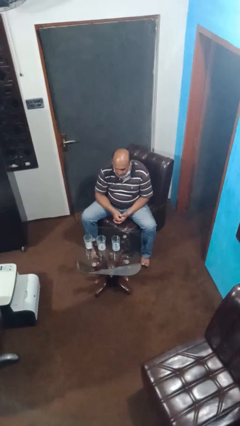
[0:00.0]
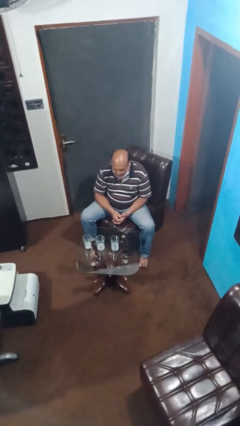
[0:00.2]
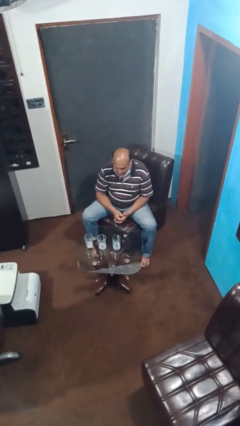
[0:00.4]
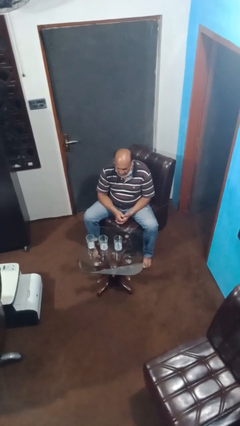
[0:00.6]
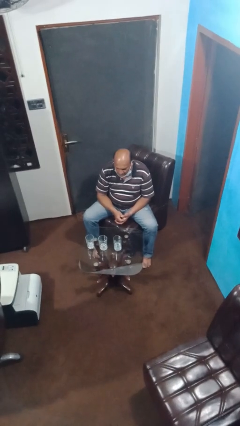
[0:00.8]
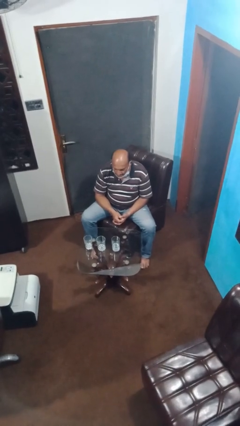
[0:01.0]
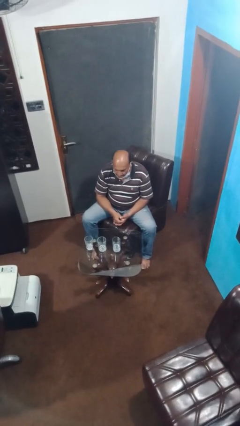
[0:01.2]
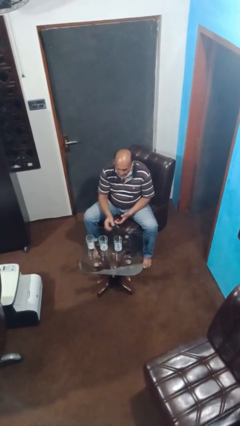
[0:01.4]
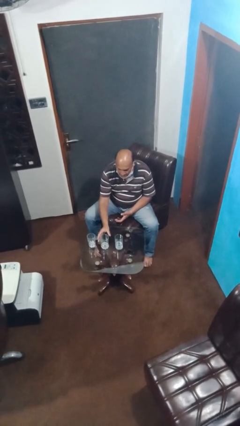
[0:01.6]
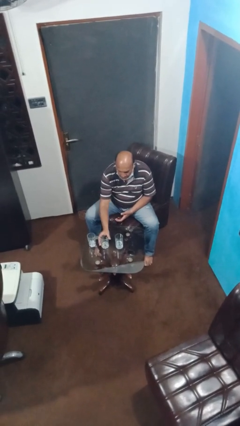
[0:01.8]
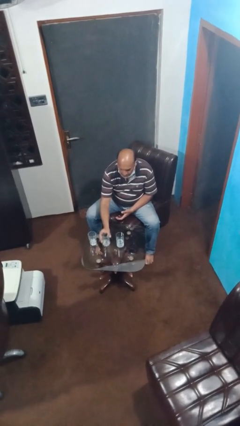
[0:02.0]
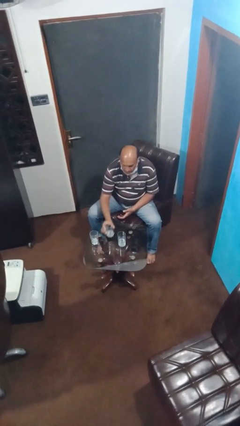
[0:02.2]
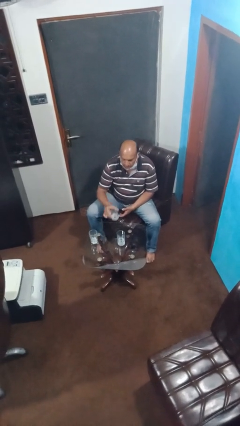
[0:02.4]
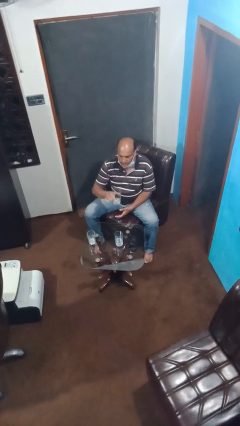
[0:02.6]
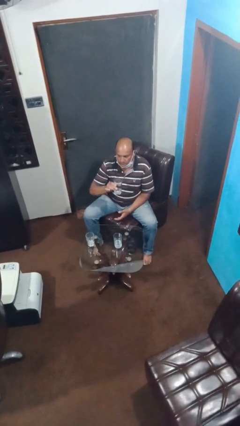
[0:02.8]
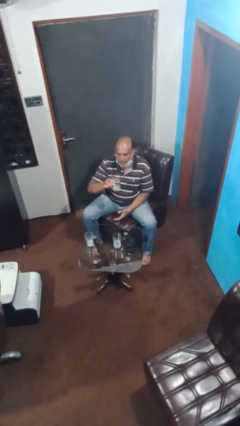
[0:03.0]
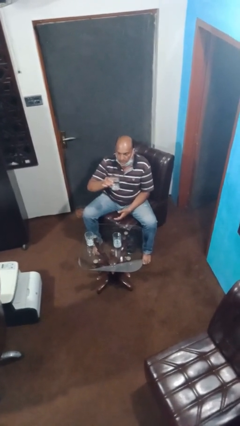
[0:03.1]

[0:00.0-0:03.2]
person picks up object from table

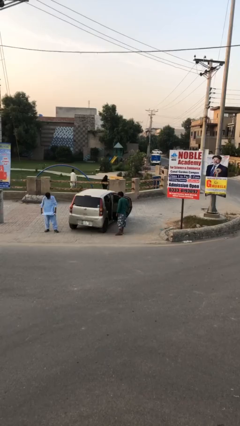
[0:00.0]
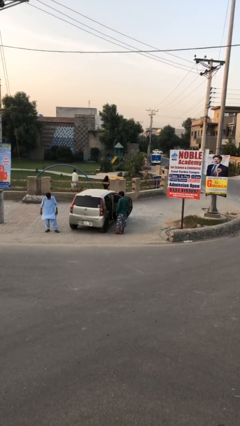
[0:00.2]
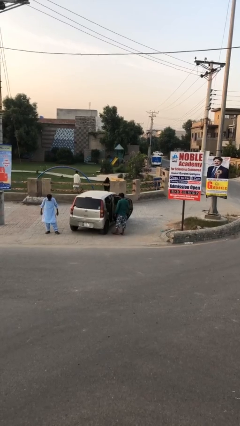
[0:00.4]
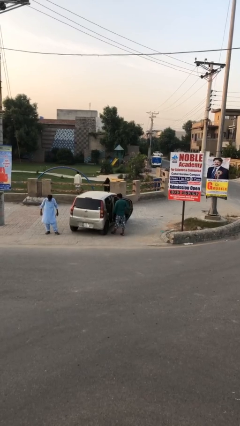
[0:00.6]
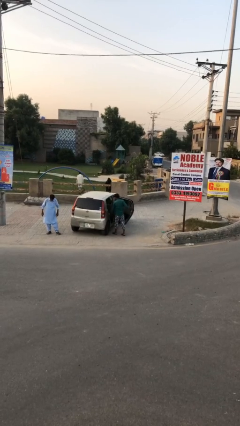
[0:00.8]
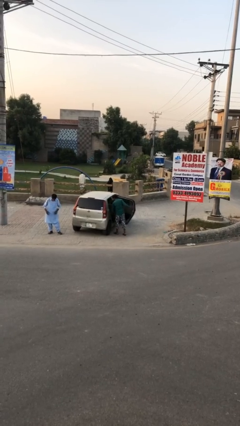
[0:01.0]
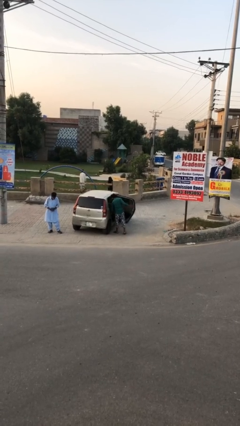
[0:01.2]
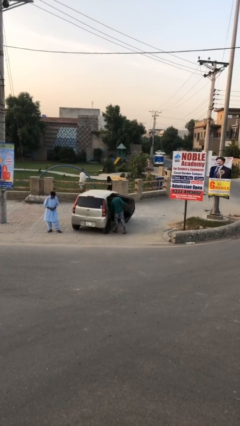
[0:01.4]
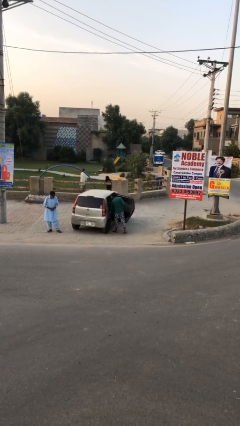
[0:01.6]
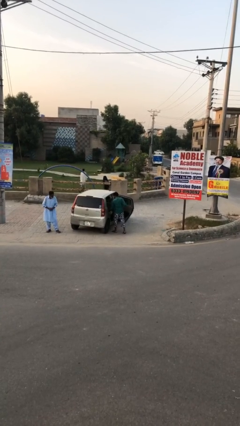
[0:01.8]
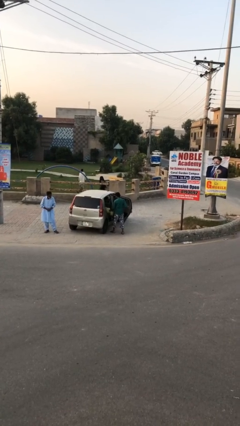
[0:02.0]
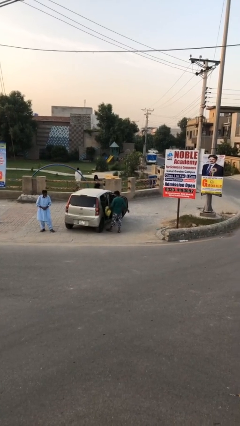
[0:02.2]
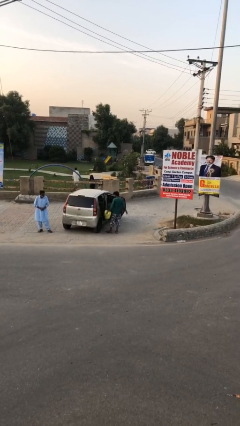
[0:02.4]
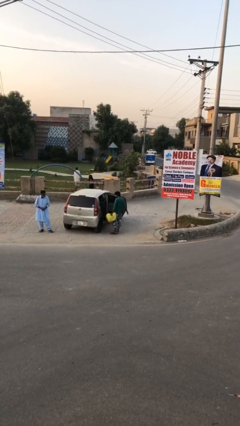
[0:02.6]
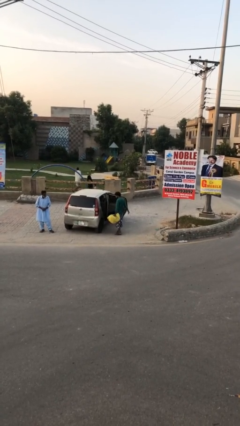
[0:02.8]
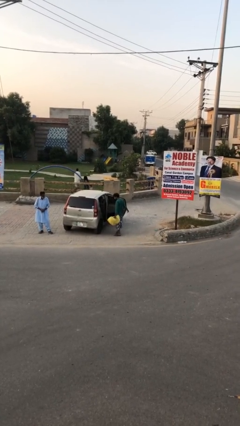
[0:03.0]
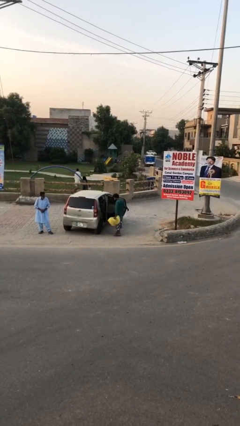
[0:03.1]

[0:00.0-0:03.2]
person unloads car

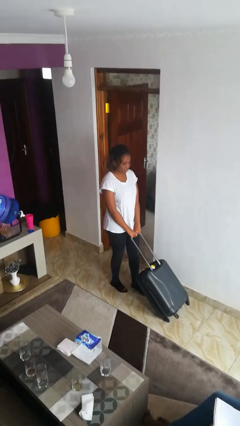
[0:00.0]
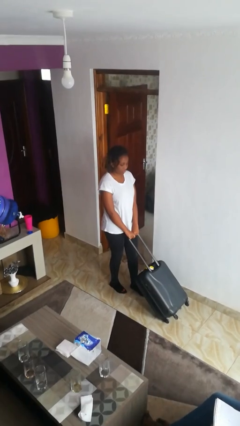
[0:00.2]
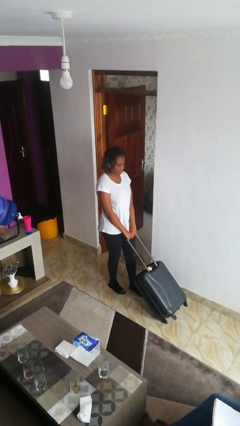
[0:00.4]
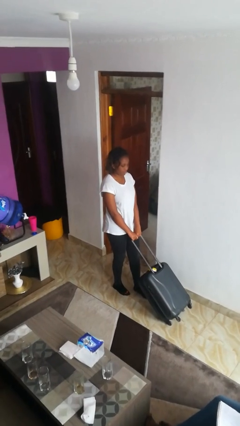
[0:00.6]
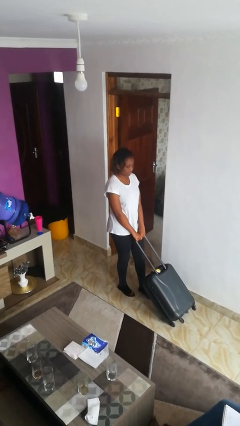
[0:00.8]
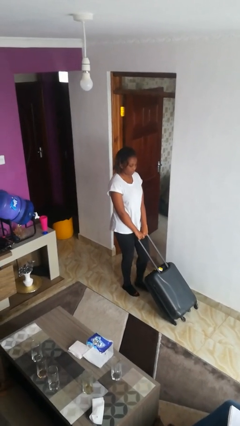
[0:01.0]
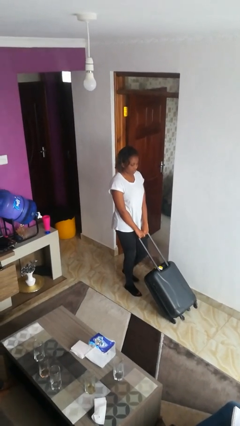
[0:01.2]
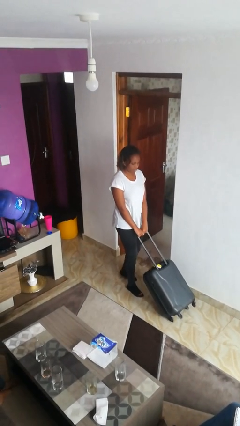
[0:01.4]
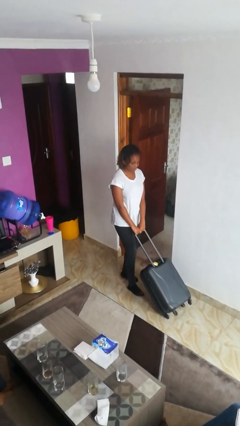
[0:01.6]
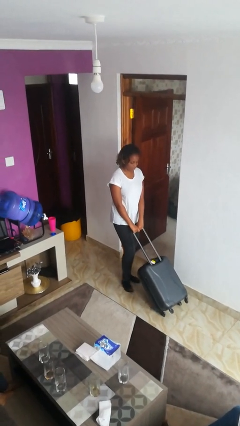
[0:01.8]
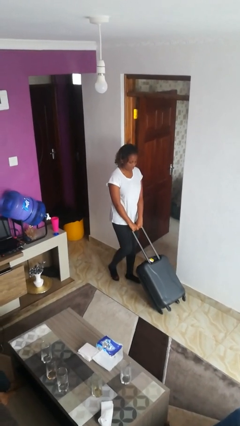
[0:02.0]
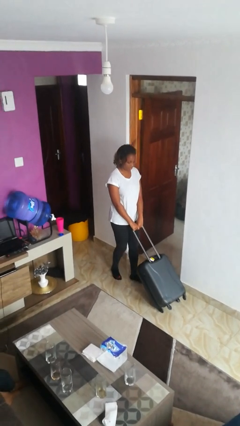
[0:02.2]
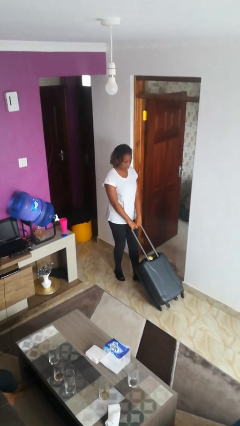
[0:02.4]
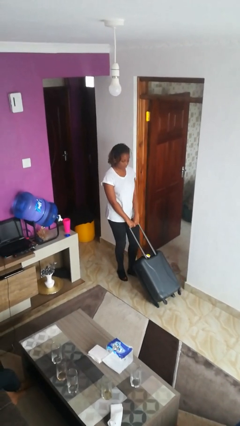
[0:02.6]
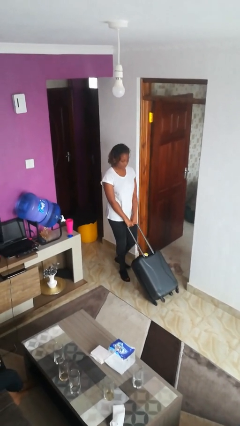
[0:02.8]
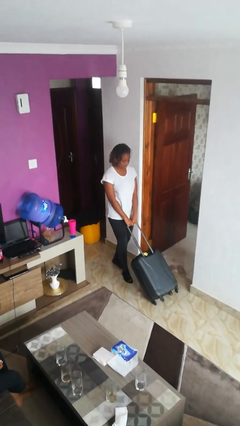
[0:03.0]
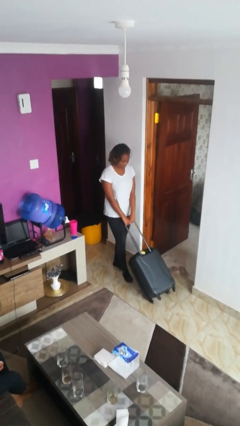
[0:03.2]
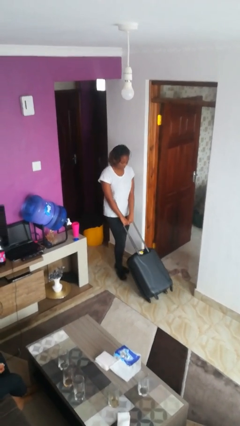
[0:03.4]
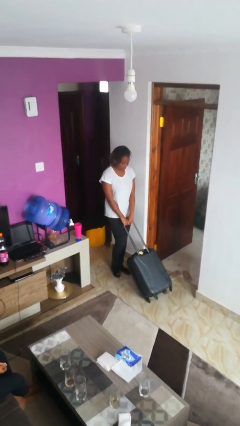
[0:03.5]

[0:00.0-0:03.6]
person pulls wheeled cart

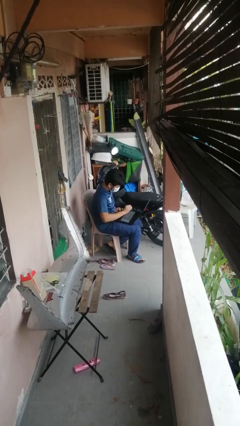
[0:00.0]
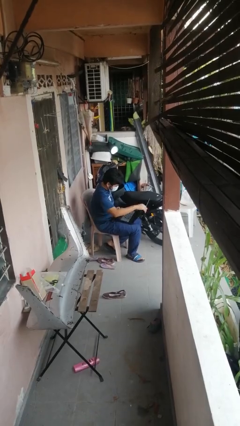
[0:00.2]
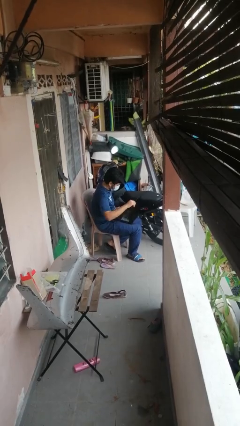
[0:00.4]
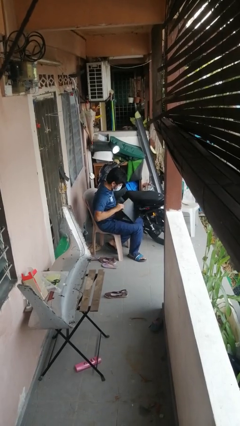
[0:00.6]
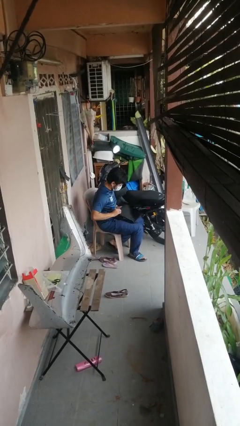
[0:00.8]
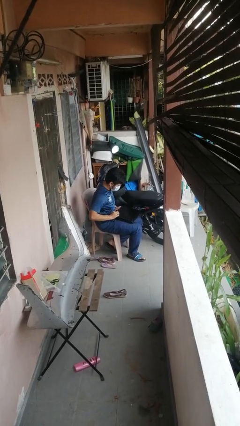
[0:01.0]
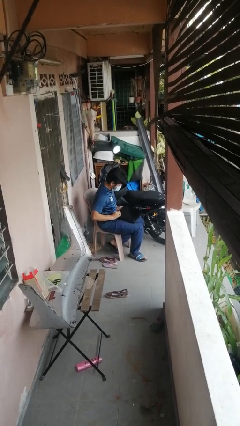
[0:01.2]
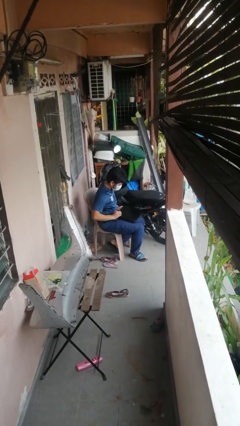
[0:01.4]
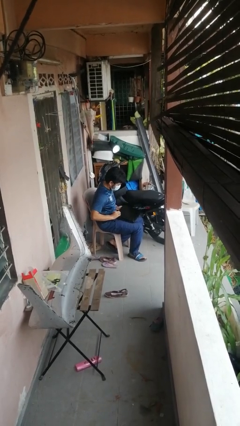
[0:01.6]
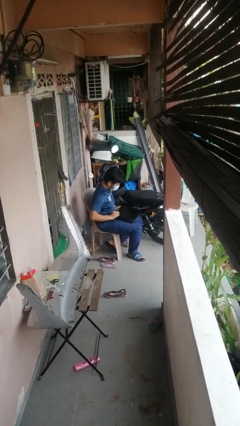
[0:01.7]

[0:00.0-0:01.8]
person closes laptop

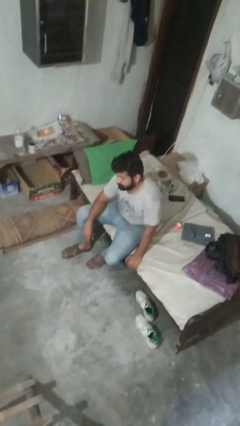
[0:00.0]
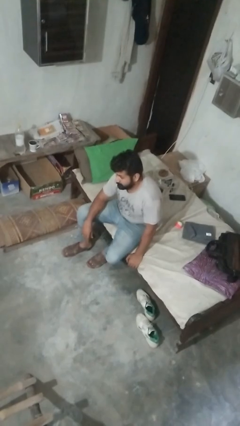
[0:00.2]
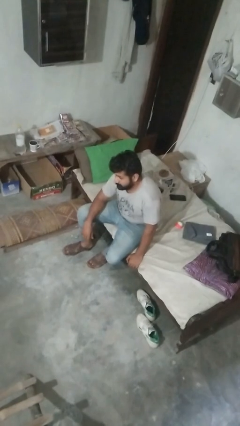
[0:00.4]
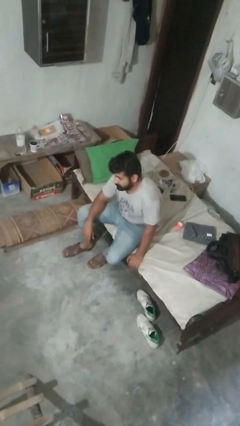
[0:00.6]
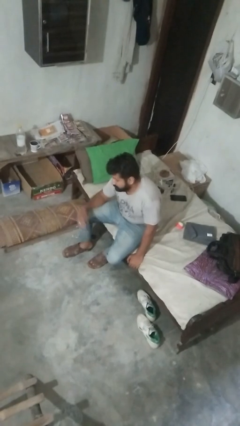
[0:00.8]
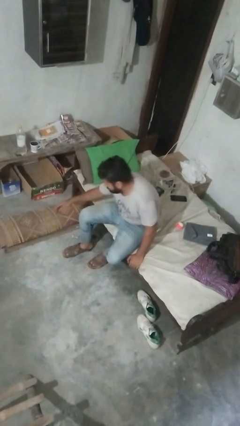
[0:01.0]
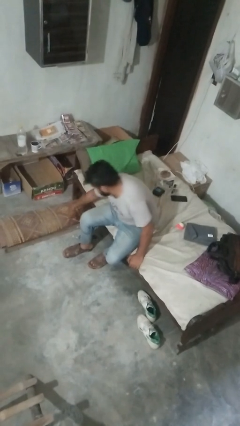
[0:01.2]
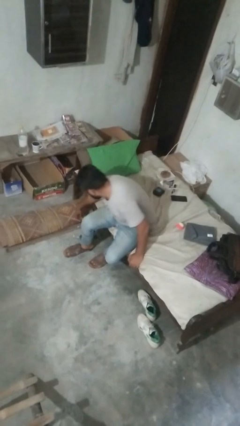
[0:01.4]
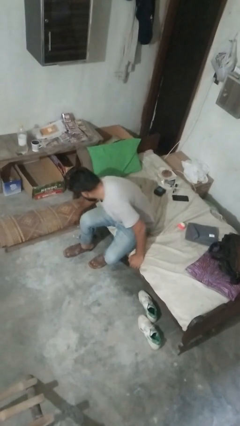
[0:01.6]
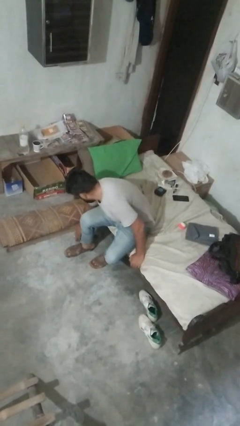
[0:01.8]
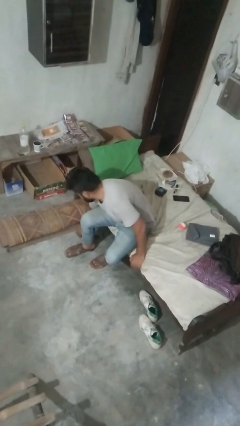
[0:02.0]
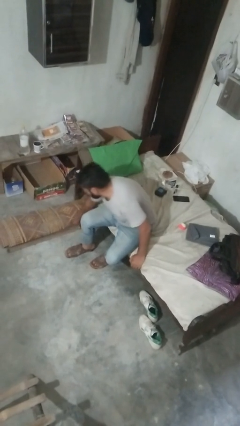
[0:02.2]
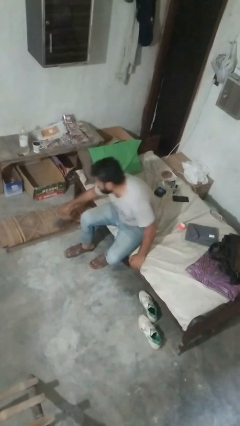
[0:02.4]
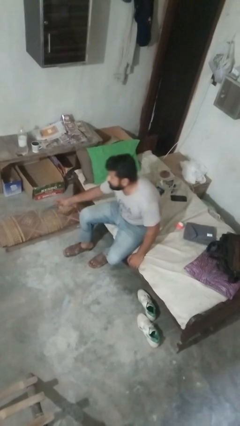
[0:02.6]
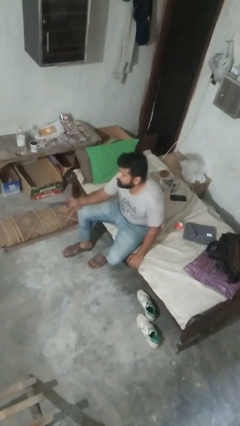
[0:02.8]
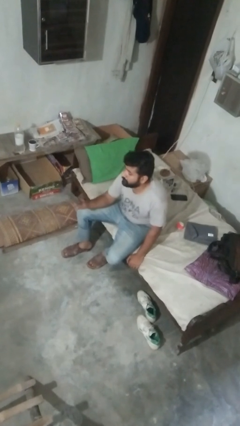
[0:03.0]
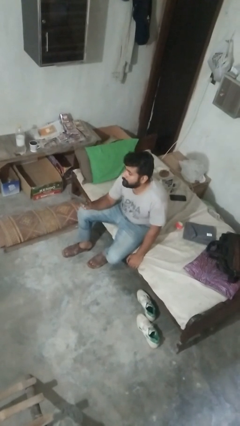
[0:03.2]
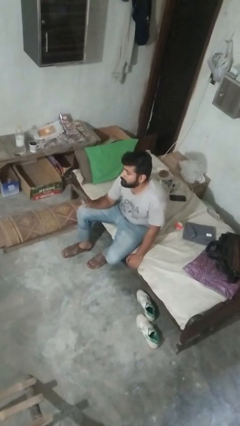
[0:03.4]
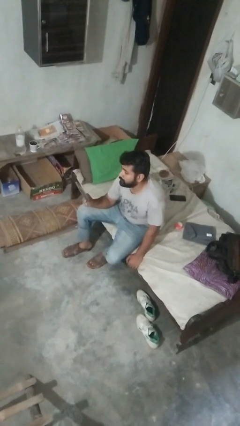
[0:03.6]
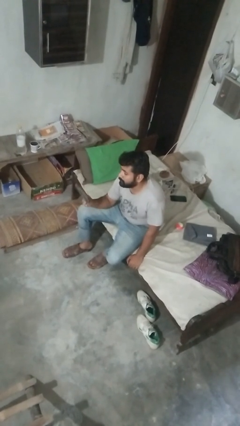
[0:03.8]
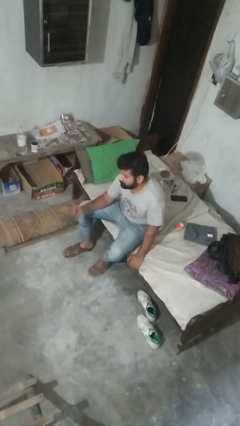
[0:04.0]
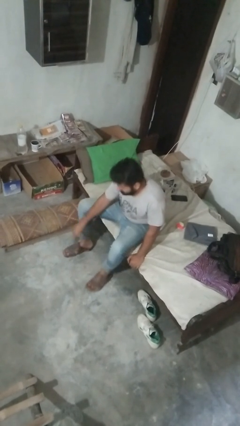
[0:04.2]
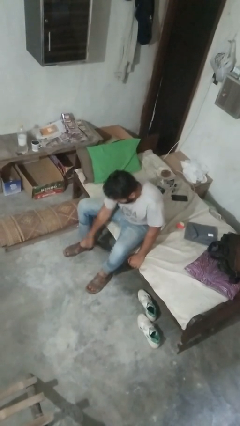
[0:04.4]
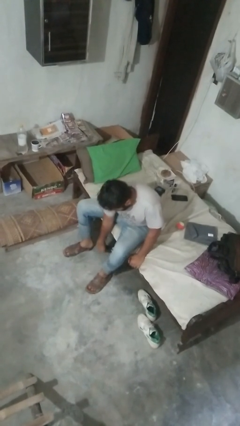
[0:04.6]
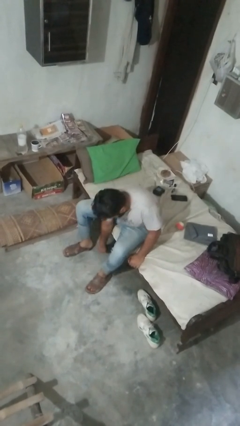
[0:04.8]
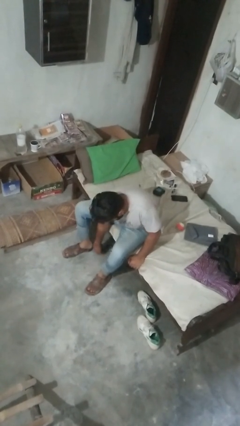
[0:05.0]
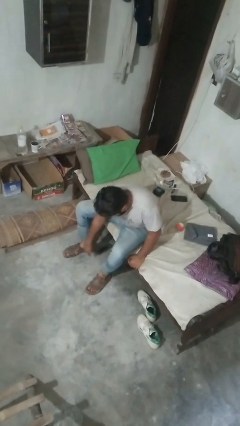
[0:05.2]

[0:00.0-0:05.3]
person searches under couch

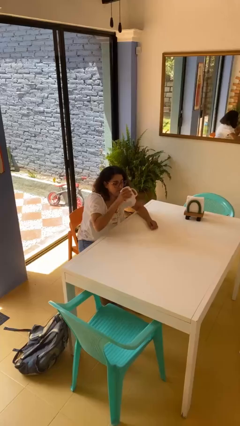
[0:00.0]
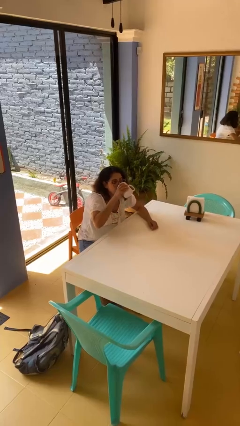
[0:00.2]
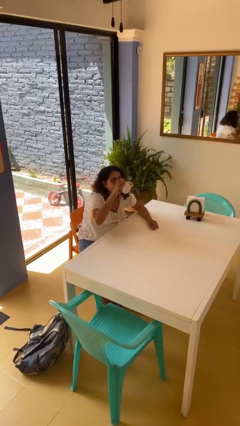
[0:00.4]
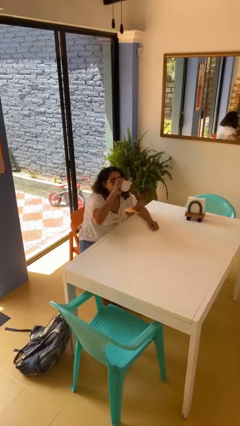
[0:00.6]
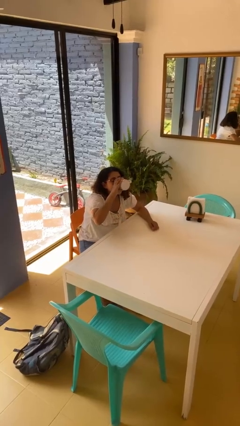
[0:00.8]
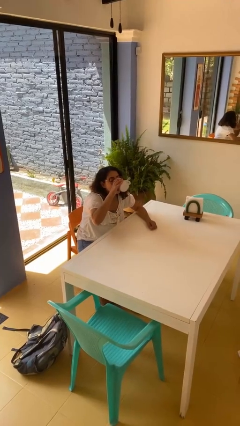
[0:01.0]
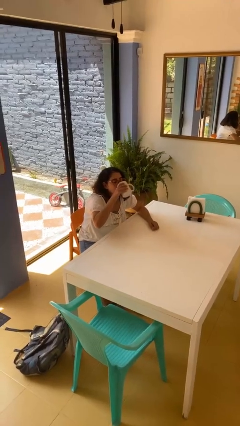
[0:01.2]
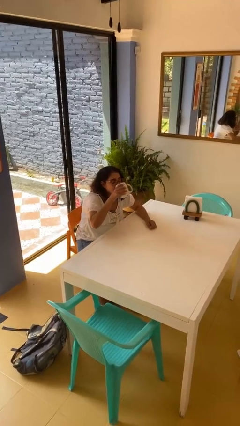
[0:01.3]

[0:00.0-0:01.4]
person drinks from mug
